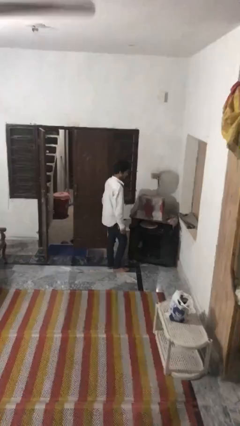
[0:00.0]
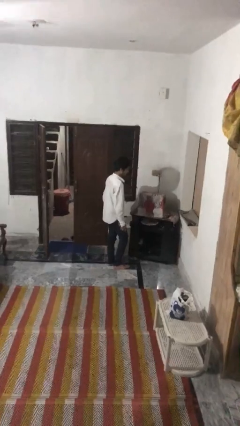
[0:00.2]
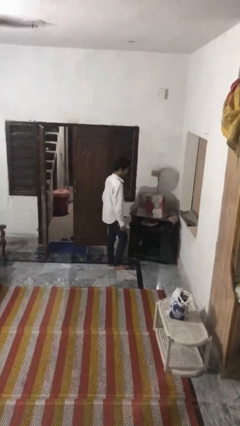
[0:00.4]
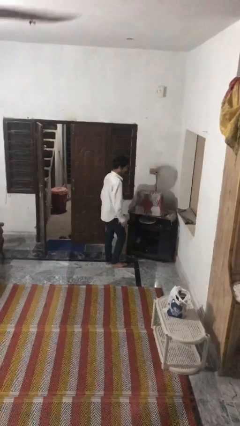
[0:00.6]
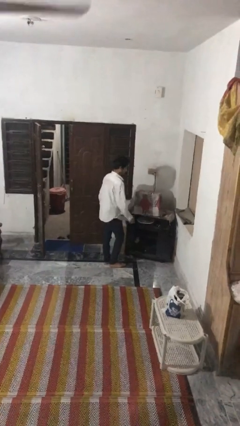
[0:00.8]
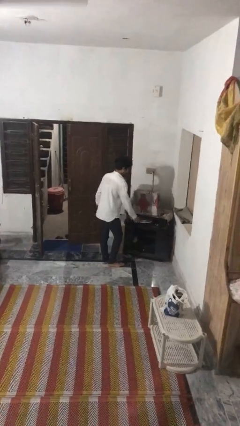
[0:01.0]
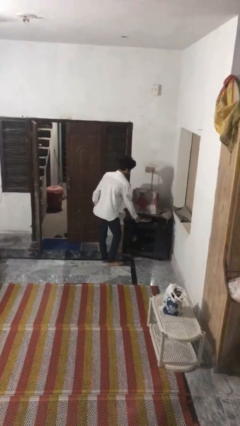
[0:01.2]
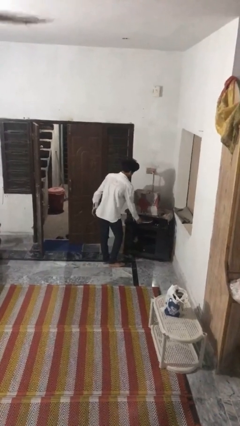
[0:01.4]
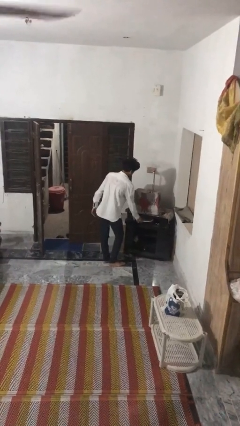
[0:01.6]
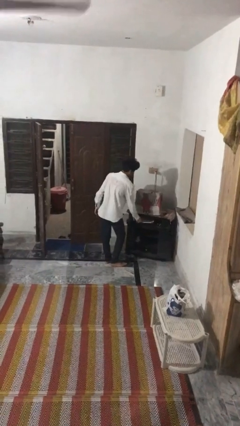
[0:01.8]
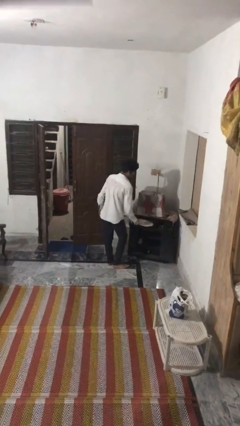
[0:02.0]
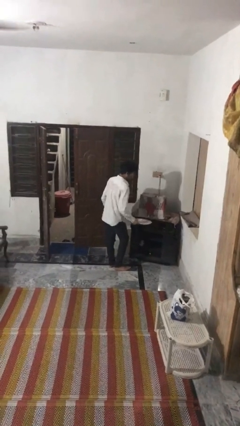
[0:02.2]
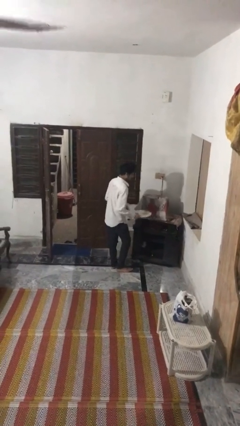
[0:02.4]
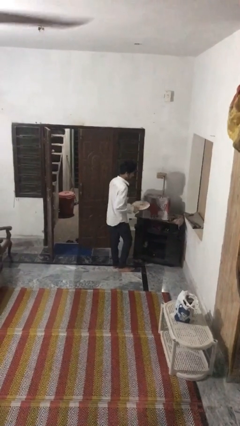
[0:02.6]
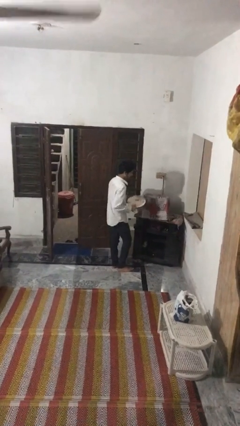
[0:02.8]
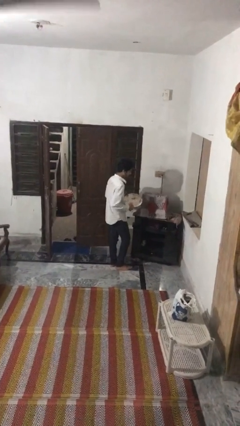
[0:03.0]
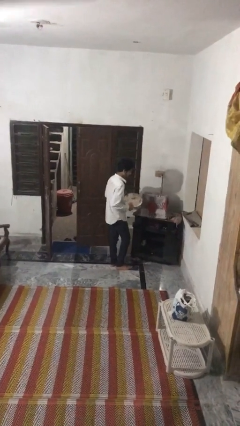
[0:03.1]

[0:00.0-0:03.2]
person picks up object from cabinet

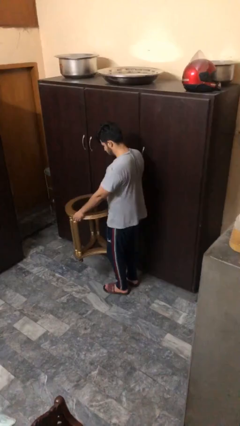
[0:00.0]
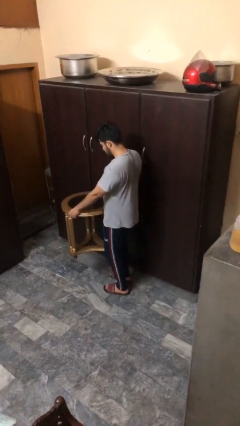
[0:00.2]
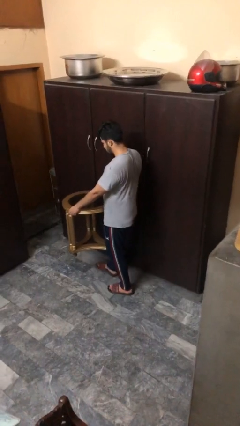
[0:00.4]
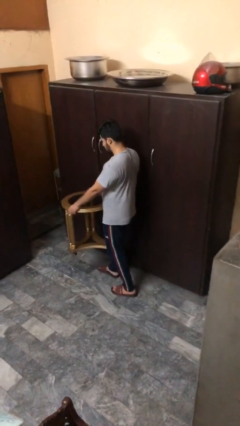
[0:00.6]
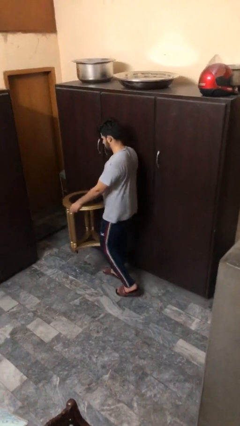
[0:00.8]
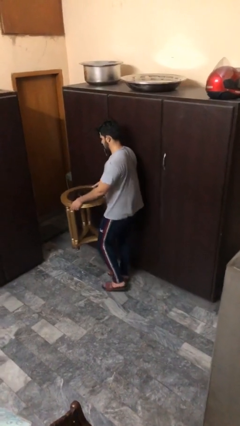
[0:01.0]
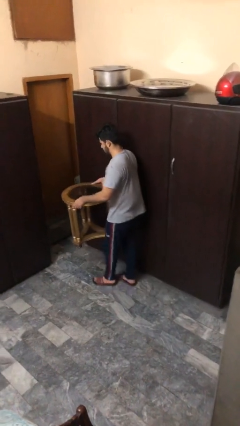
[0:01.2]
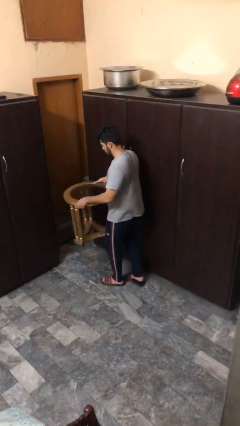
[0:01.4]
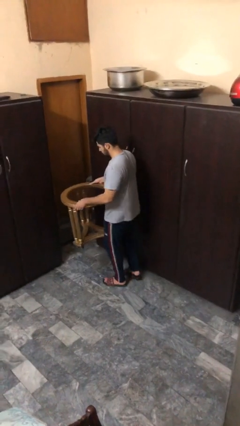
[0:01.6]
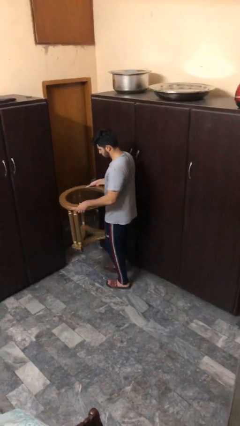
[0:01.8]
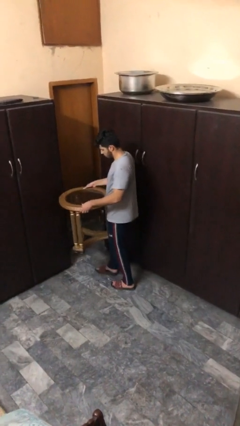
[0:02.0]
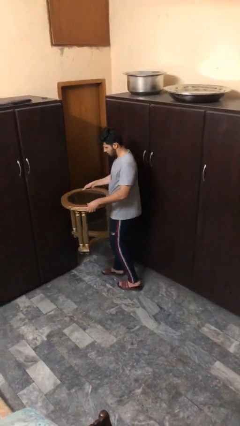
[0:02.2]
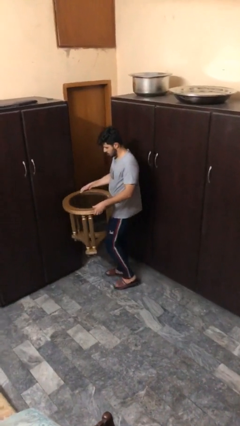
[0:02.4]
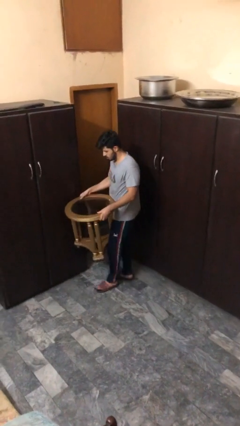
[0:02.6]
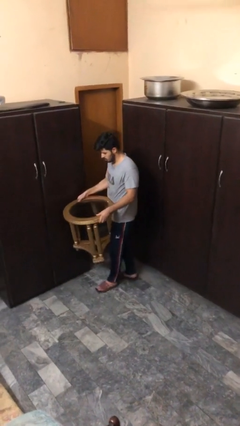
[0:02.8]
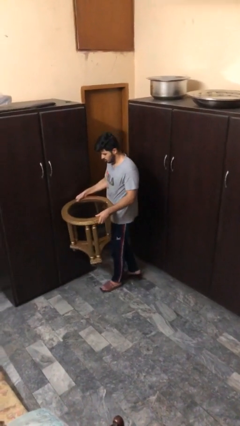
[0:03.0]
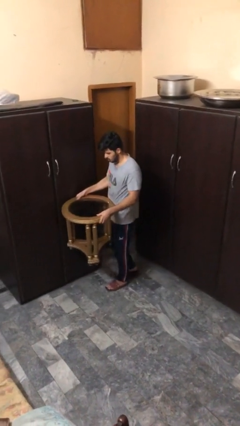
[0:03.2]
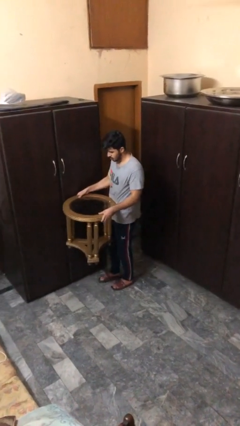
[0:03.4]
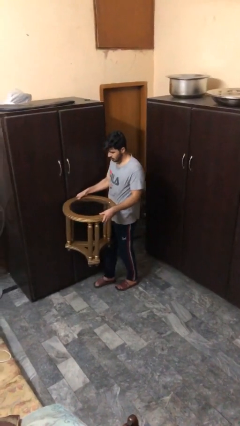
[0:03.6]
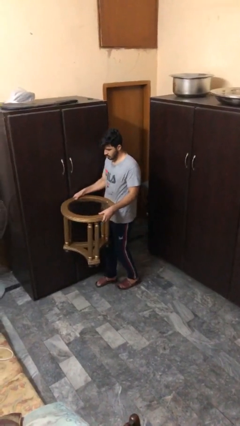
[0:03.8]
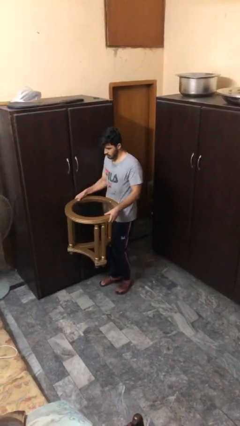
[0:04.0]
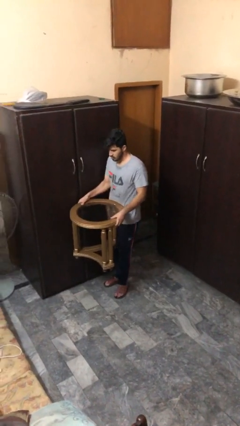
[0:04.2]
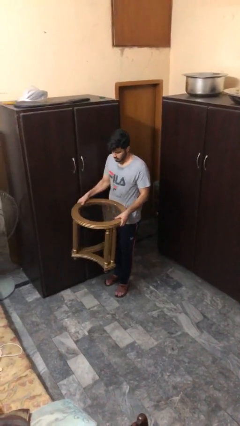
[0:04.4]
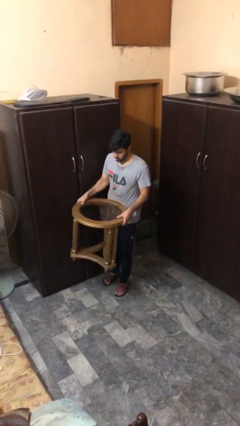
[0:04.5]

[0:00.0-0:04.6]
person carries furniture

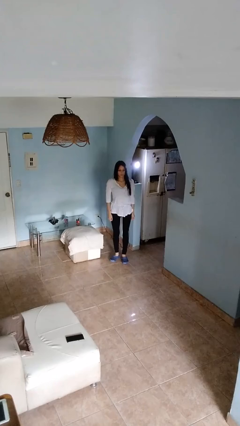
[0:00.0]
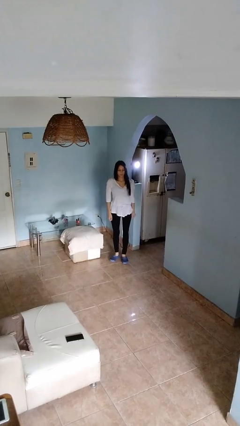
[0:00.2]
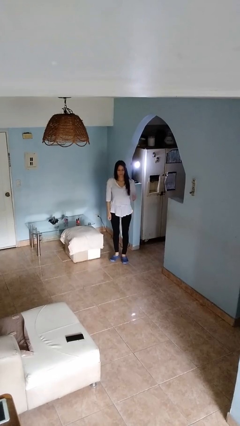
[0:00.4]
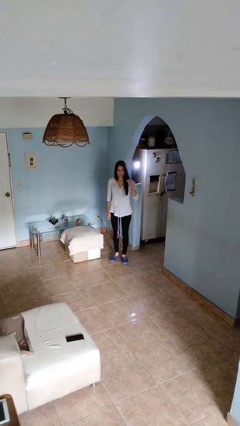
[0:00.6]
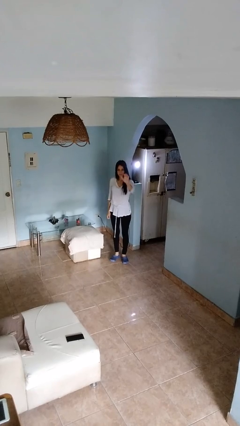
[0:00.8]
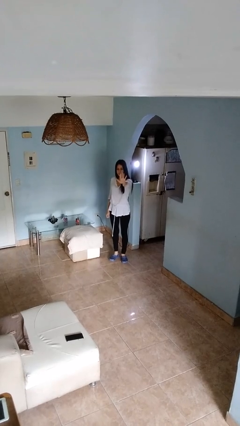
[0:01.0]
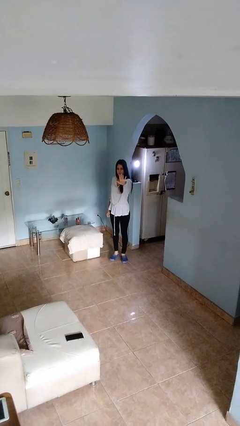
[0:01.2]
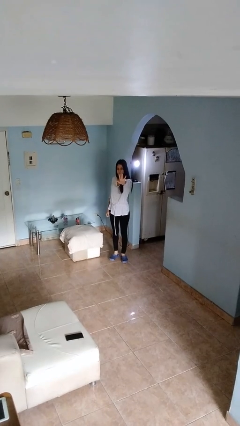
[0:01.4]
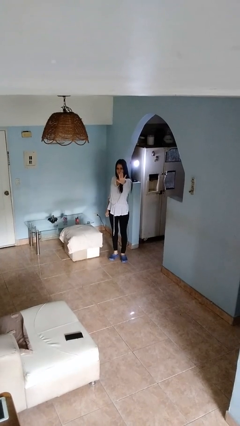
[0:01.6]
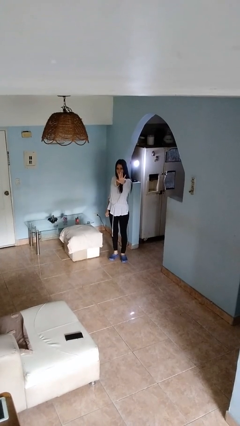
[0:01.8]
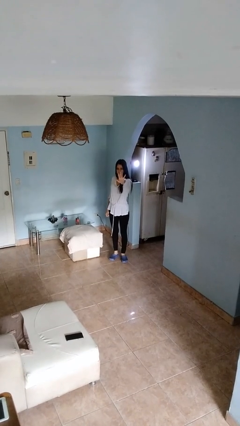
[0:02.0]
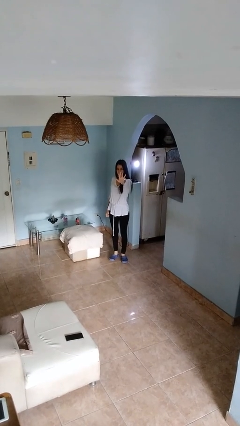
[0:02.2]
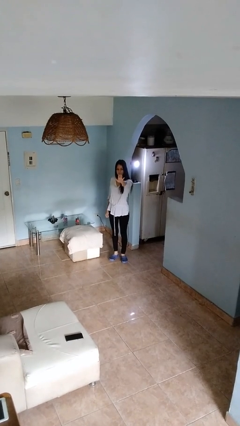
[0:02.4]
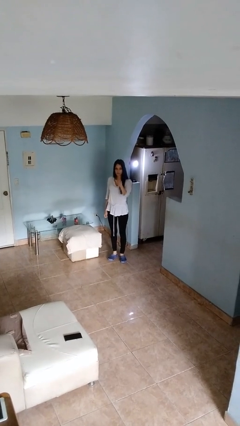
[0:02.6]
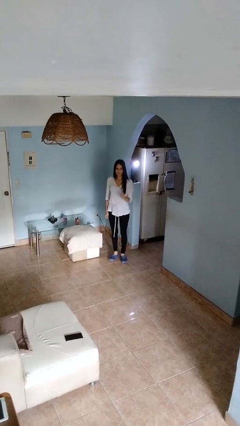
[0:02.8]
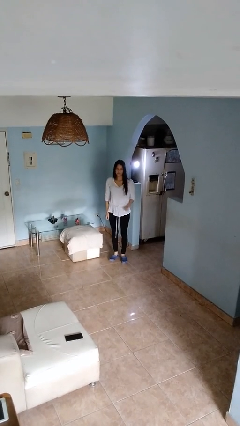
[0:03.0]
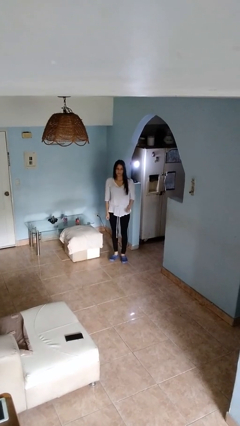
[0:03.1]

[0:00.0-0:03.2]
person gestures number five

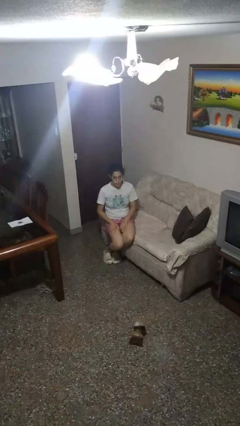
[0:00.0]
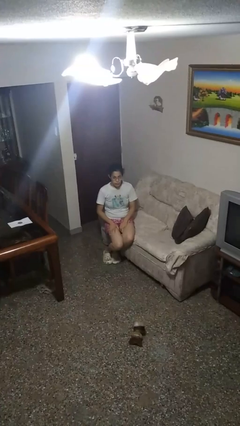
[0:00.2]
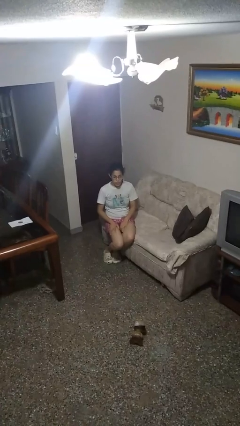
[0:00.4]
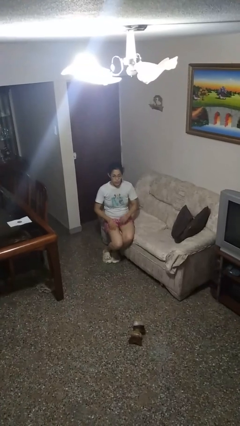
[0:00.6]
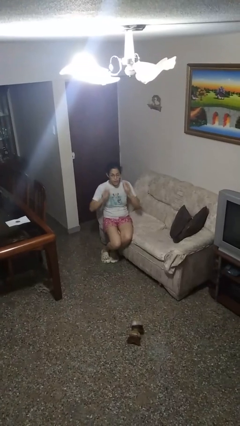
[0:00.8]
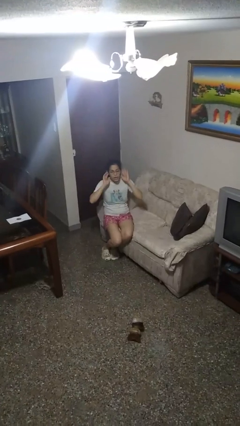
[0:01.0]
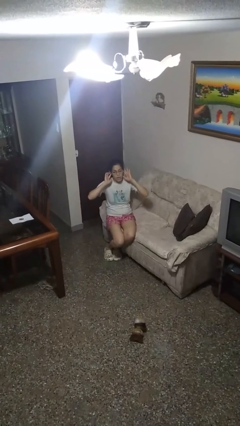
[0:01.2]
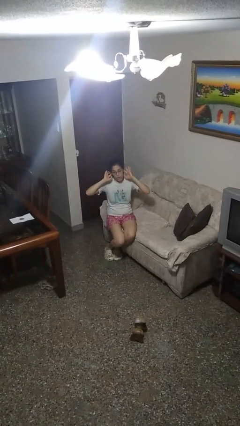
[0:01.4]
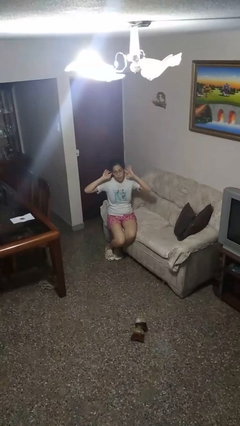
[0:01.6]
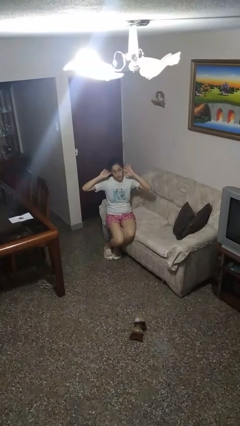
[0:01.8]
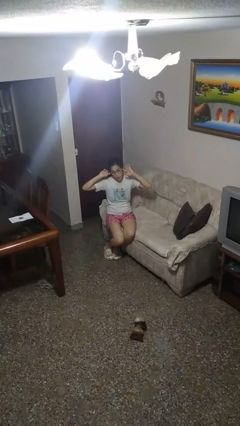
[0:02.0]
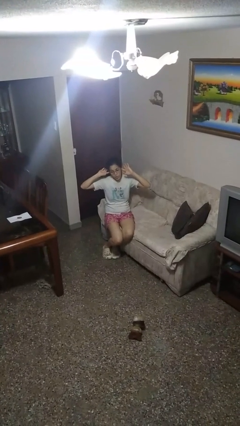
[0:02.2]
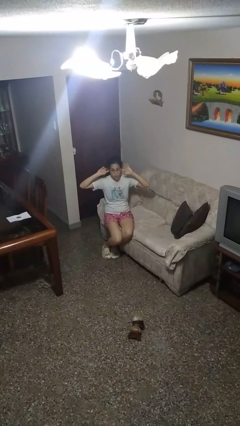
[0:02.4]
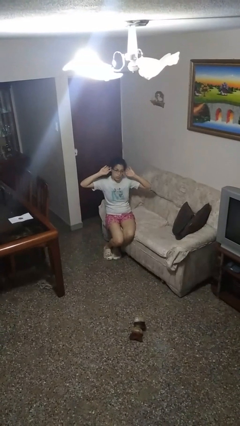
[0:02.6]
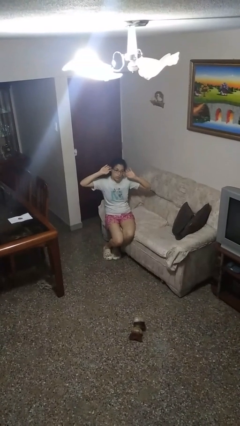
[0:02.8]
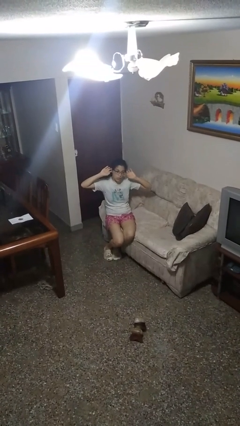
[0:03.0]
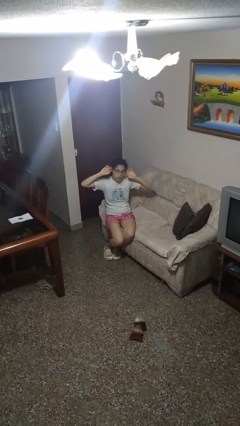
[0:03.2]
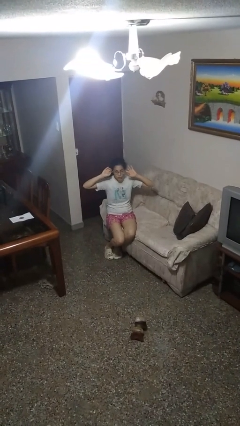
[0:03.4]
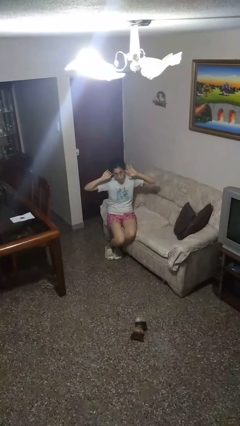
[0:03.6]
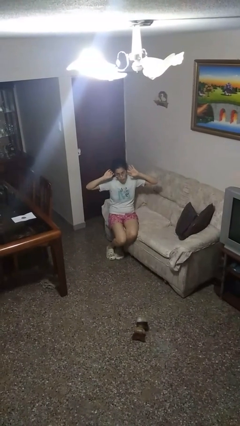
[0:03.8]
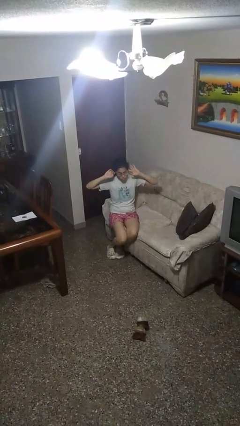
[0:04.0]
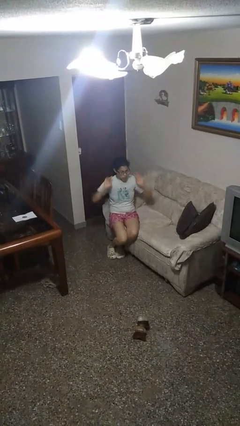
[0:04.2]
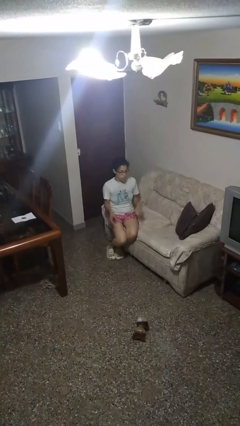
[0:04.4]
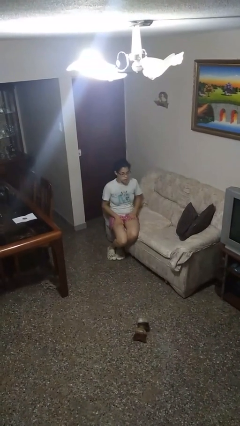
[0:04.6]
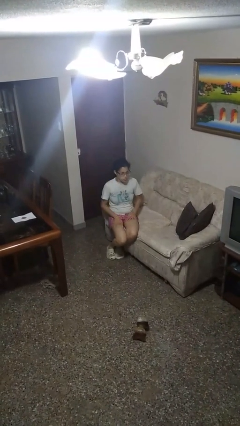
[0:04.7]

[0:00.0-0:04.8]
person puts fingers in ear

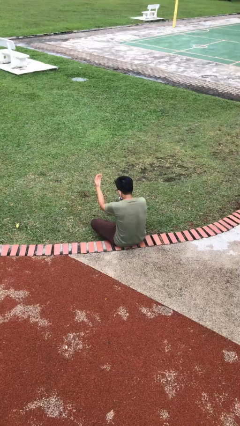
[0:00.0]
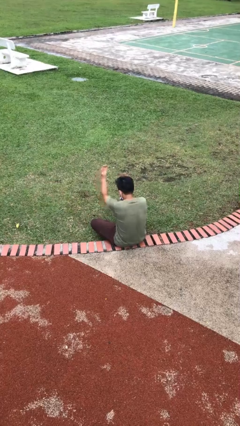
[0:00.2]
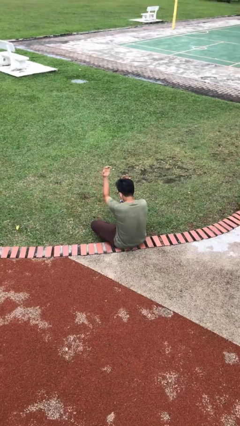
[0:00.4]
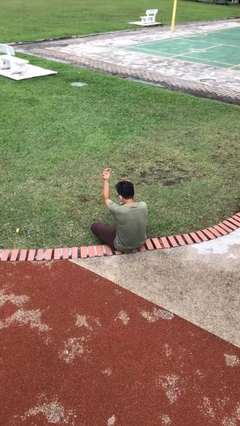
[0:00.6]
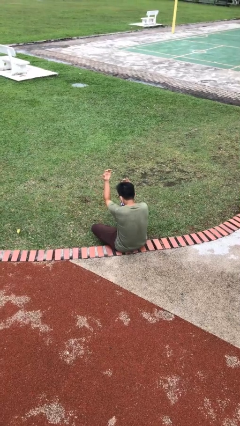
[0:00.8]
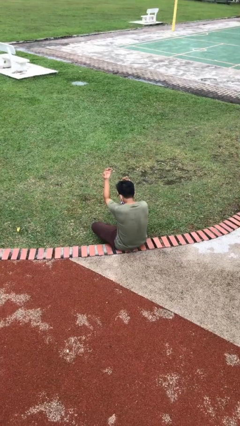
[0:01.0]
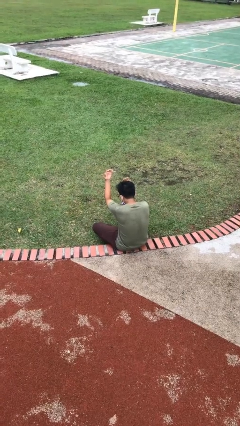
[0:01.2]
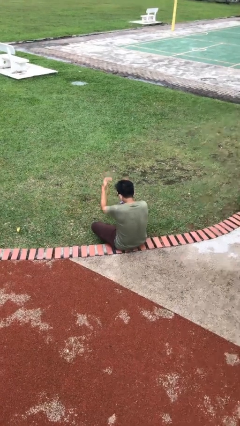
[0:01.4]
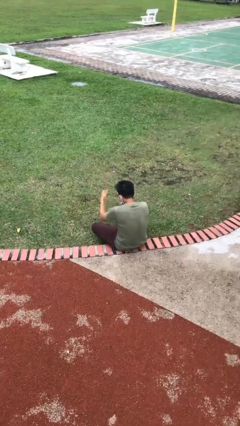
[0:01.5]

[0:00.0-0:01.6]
person prays

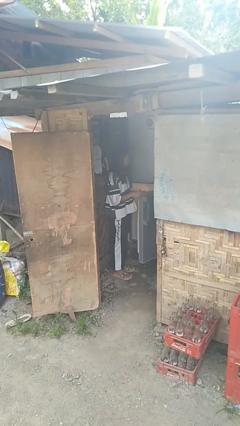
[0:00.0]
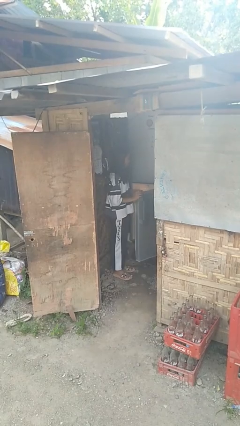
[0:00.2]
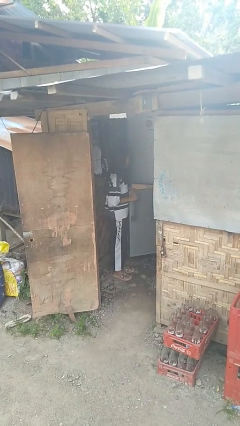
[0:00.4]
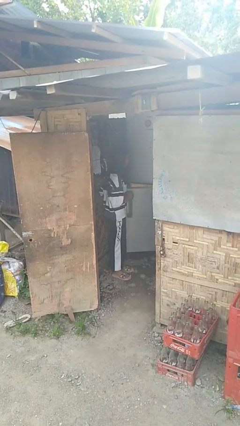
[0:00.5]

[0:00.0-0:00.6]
person closes refrigerator
